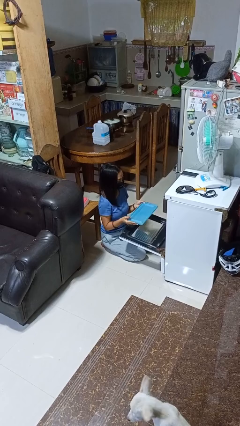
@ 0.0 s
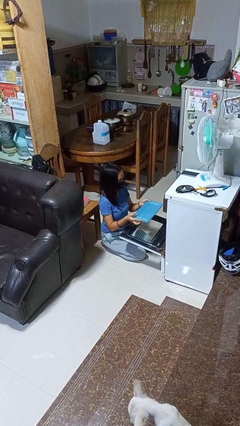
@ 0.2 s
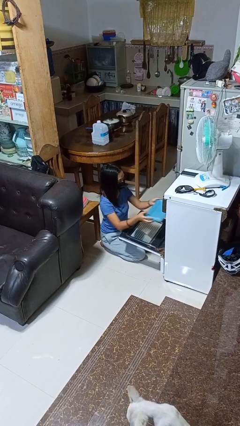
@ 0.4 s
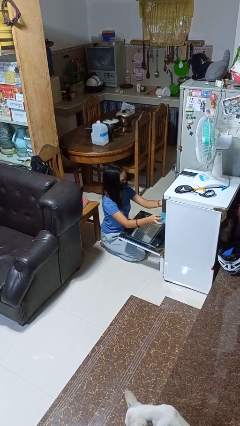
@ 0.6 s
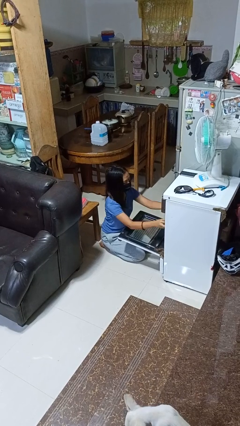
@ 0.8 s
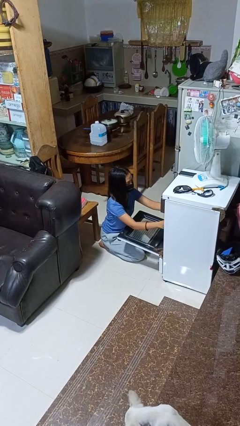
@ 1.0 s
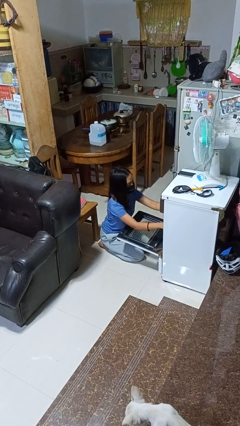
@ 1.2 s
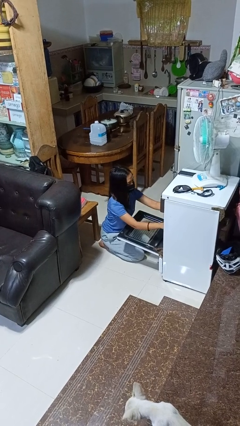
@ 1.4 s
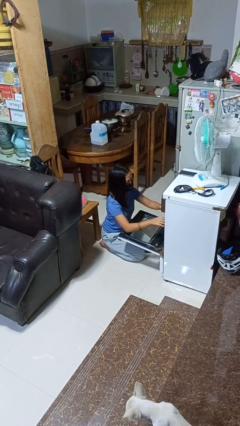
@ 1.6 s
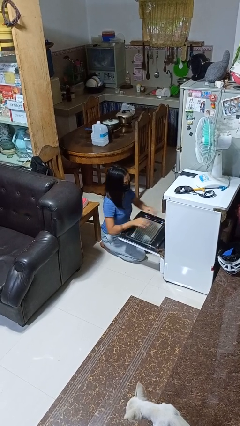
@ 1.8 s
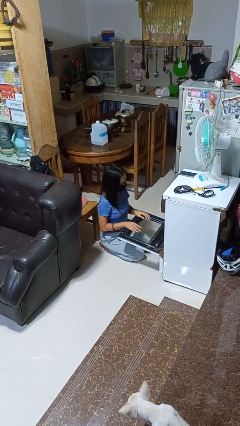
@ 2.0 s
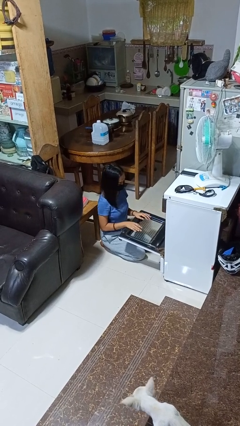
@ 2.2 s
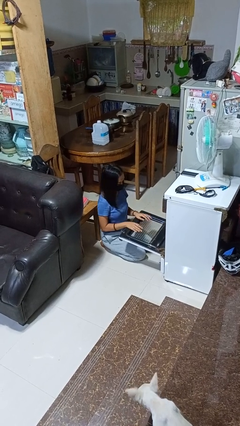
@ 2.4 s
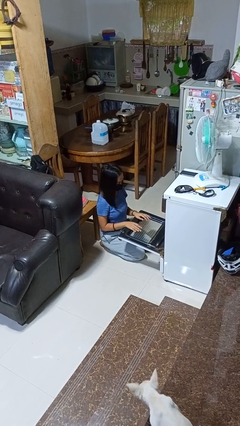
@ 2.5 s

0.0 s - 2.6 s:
person puts object into oven

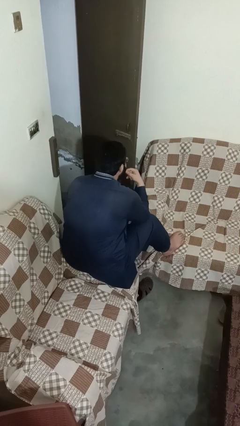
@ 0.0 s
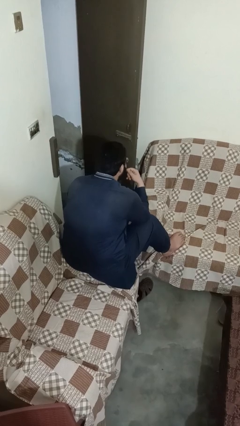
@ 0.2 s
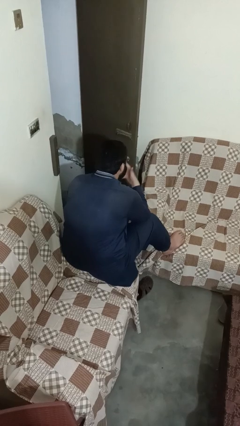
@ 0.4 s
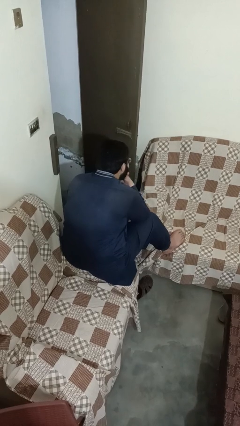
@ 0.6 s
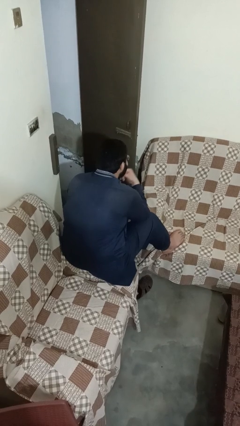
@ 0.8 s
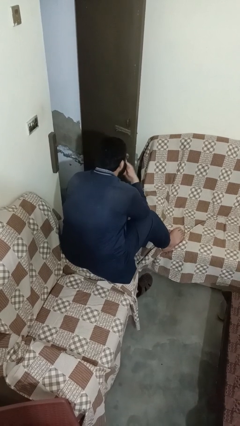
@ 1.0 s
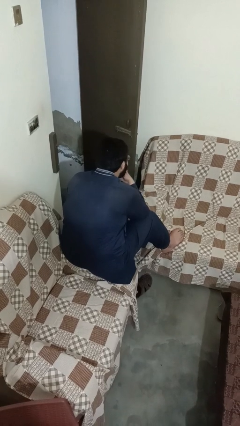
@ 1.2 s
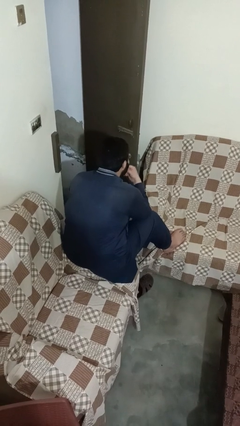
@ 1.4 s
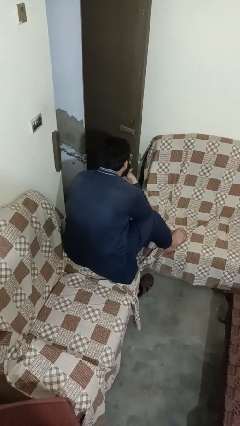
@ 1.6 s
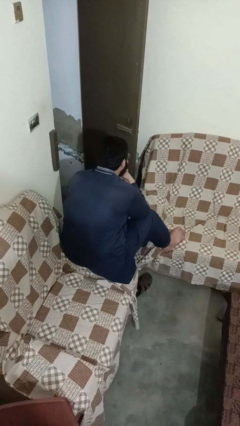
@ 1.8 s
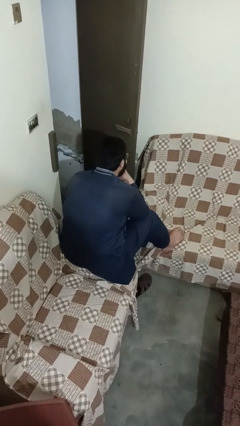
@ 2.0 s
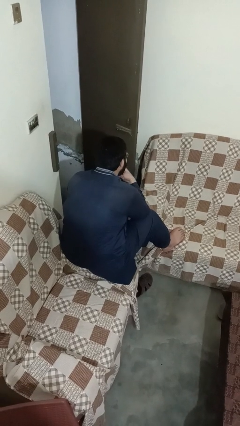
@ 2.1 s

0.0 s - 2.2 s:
person strokes chin

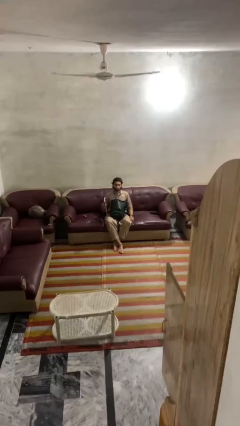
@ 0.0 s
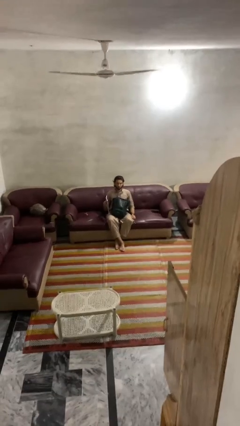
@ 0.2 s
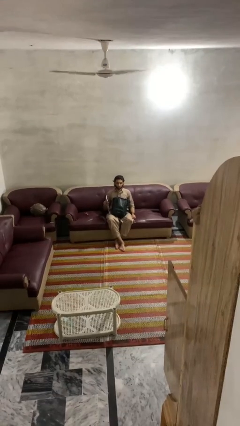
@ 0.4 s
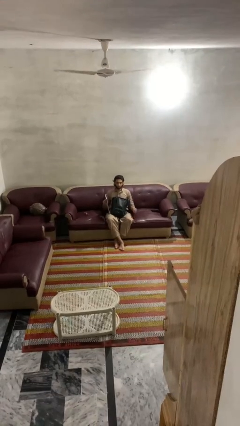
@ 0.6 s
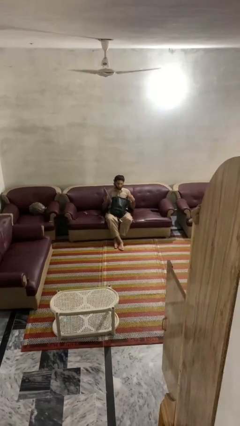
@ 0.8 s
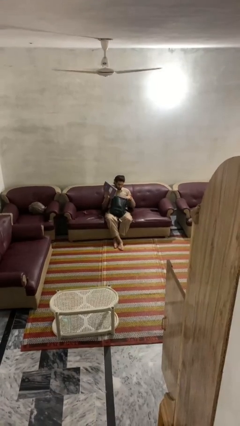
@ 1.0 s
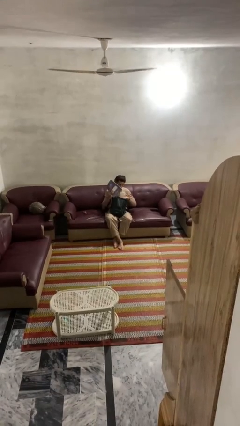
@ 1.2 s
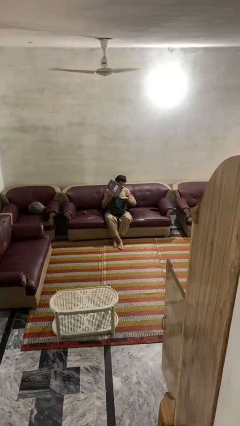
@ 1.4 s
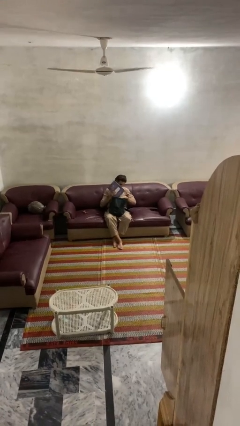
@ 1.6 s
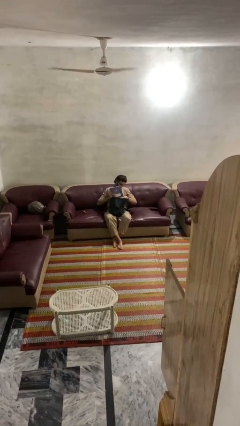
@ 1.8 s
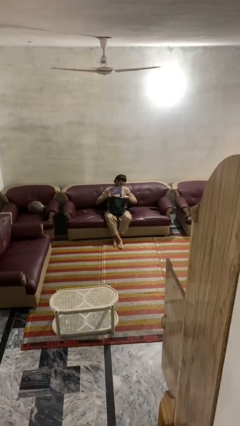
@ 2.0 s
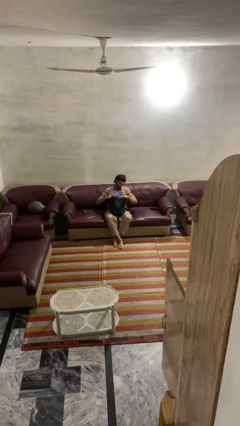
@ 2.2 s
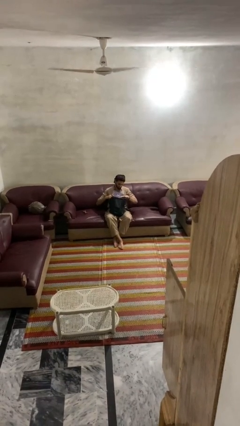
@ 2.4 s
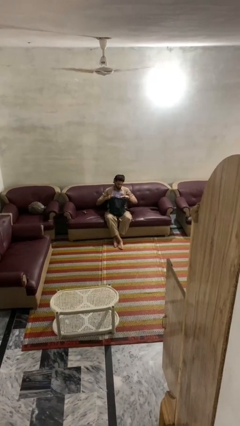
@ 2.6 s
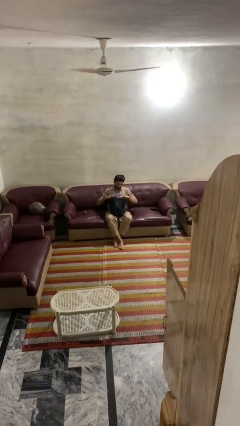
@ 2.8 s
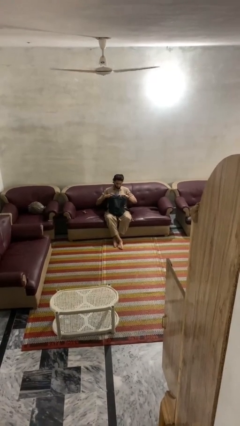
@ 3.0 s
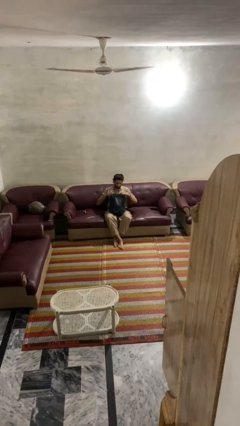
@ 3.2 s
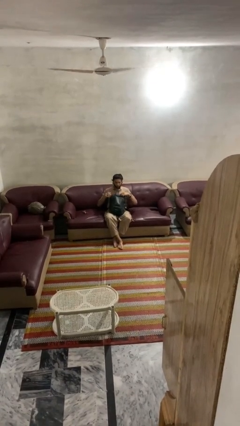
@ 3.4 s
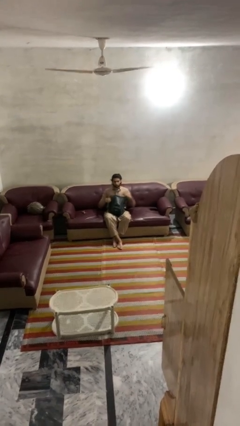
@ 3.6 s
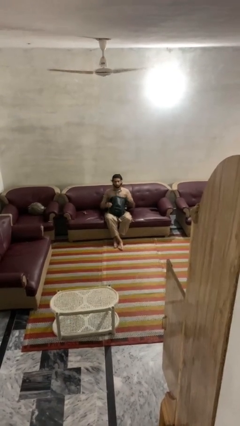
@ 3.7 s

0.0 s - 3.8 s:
person puts object into backpack

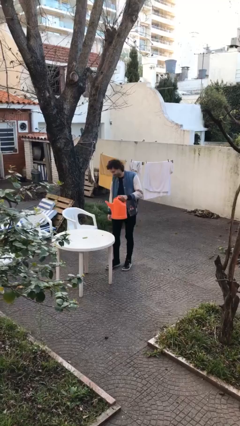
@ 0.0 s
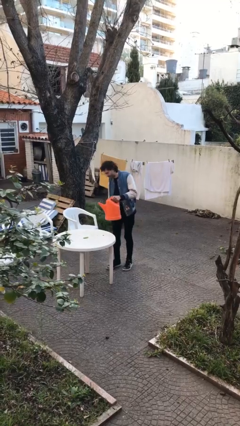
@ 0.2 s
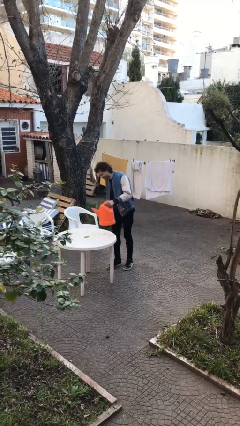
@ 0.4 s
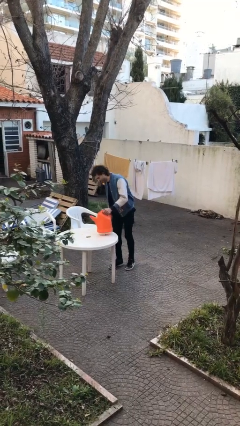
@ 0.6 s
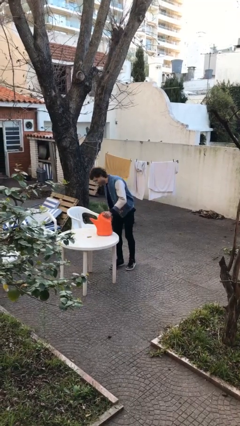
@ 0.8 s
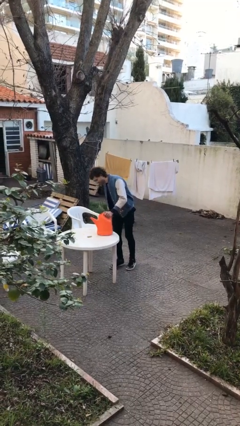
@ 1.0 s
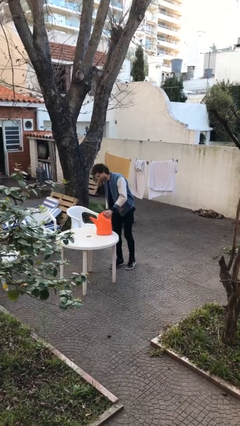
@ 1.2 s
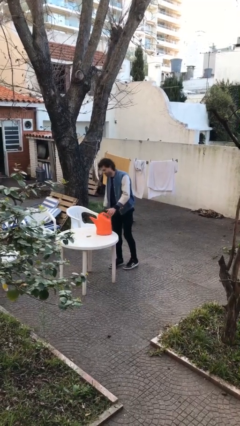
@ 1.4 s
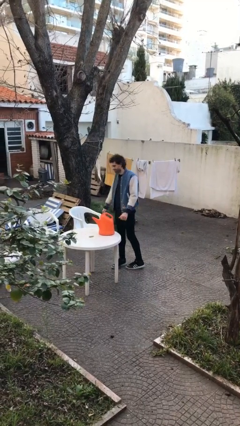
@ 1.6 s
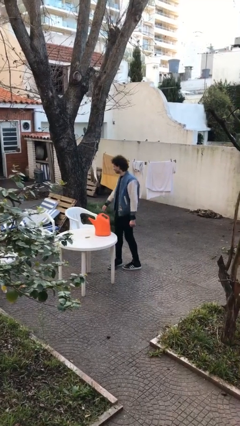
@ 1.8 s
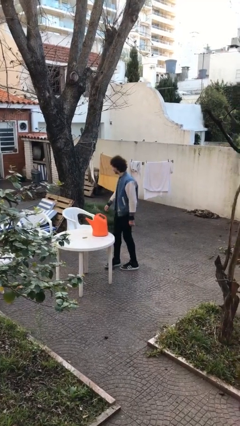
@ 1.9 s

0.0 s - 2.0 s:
person puts down object on table

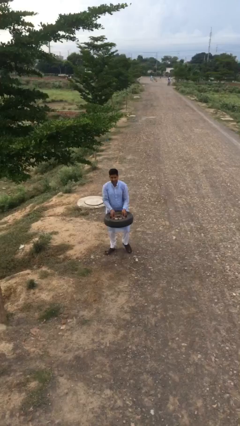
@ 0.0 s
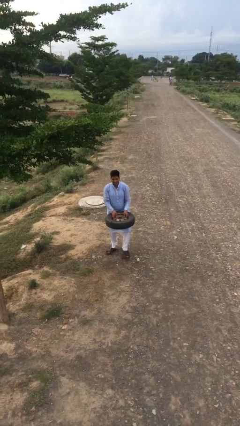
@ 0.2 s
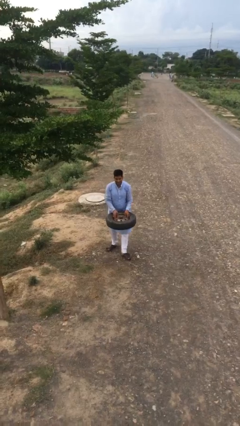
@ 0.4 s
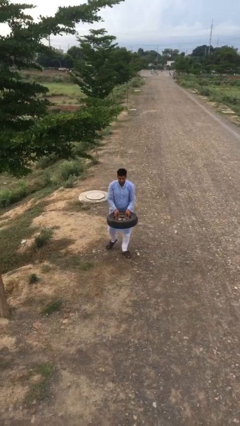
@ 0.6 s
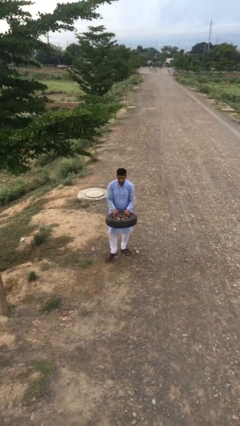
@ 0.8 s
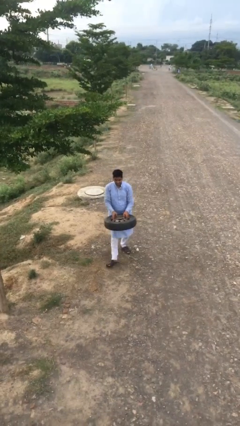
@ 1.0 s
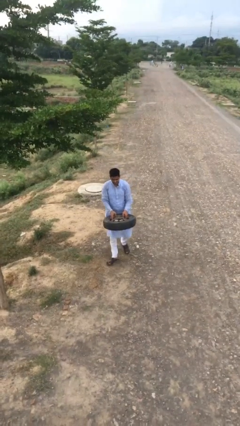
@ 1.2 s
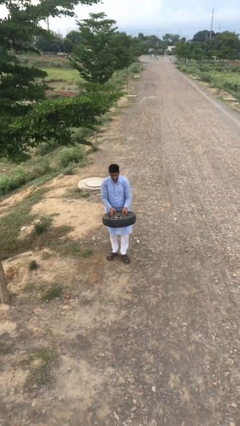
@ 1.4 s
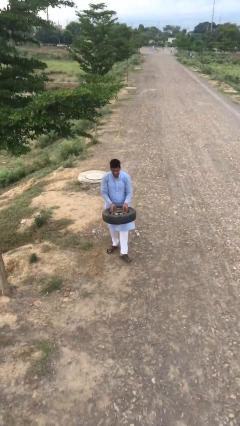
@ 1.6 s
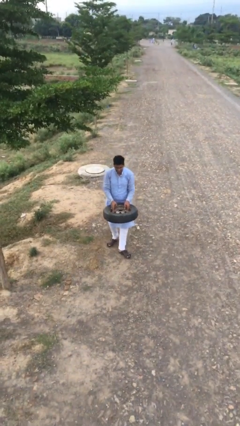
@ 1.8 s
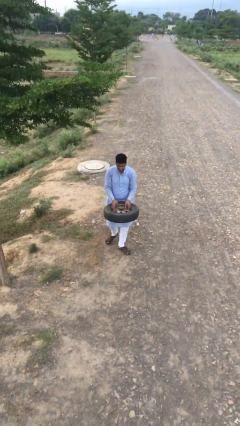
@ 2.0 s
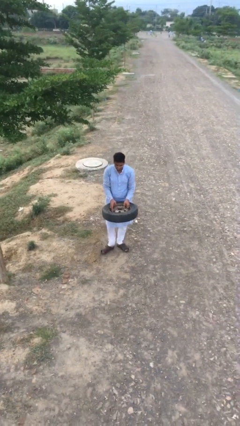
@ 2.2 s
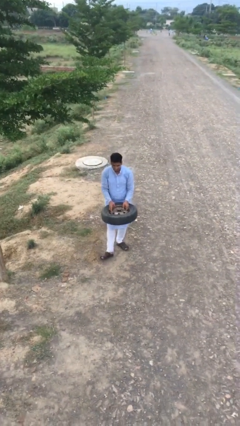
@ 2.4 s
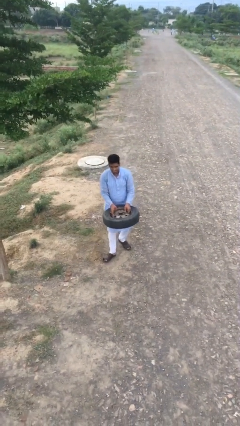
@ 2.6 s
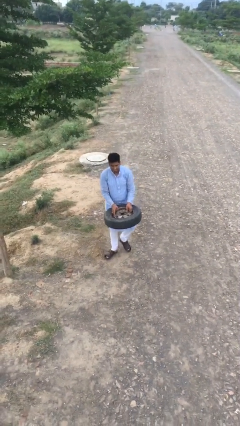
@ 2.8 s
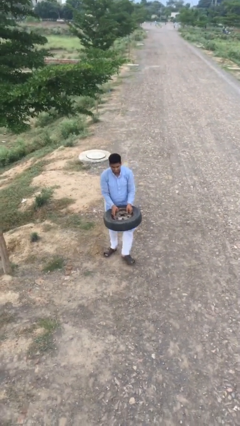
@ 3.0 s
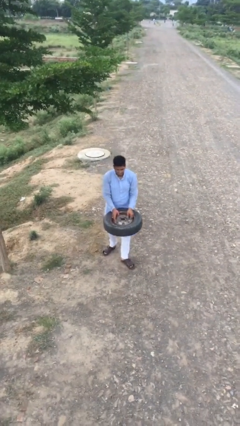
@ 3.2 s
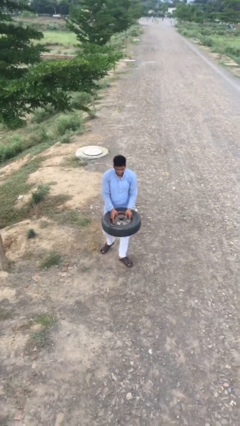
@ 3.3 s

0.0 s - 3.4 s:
person carries heavy object

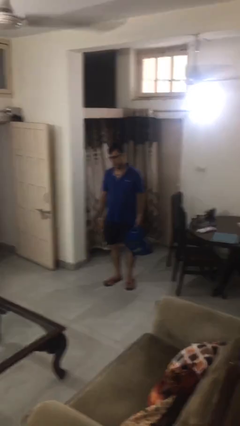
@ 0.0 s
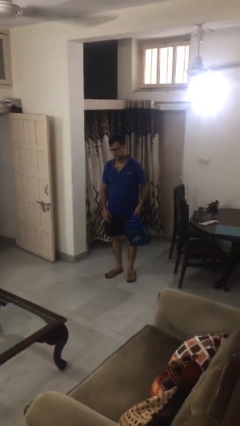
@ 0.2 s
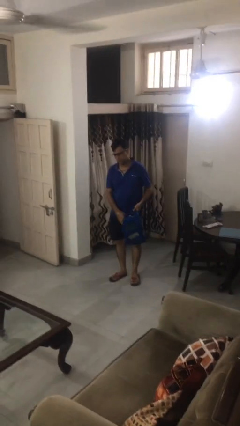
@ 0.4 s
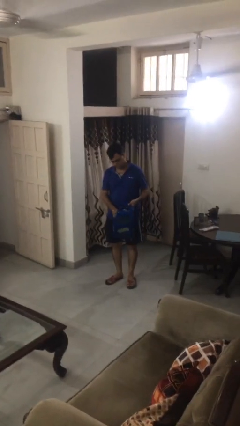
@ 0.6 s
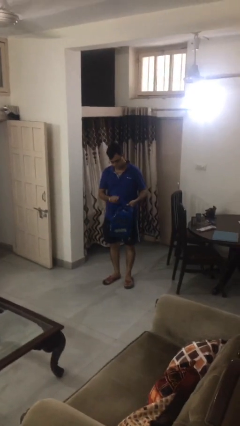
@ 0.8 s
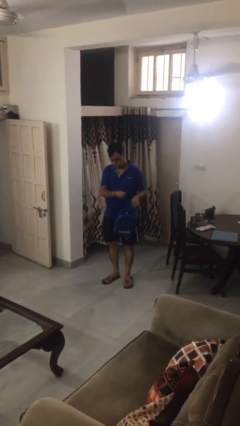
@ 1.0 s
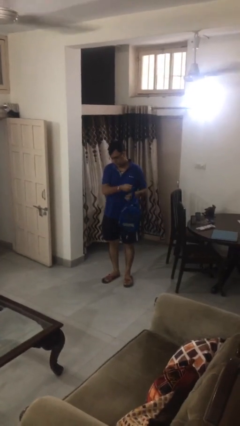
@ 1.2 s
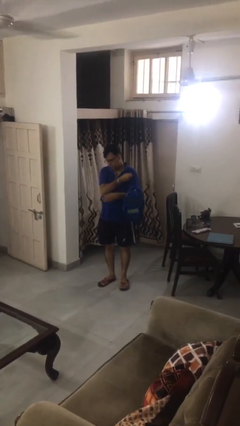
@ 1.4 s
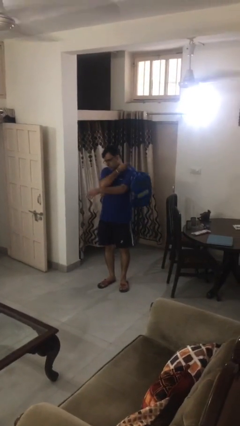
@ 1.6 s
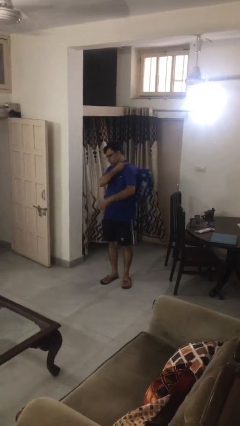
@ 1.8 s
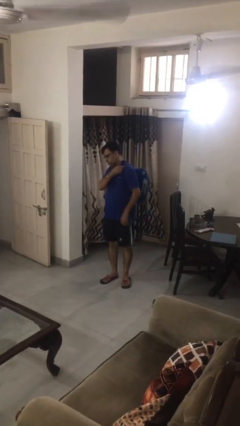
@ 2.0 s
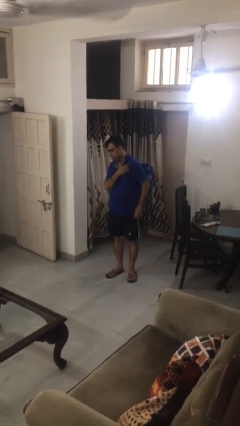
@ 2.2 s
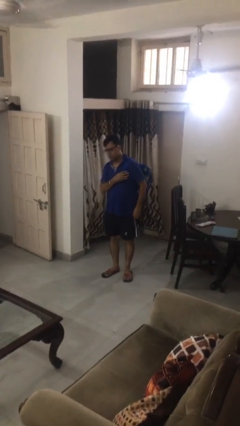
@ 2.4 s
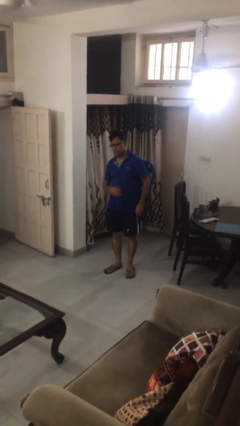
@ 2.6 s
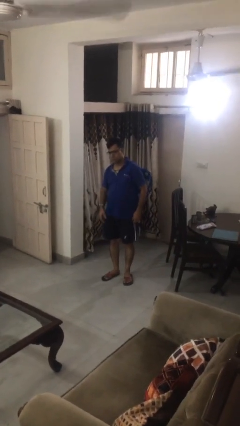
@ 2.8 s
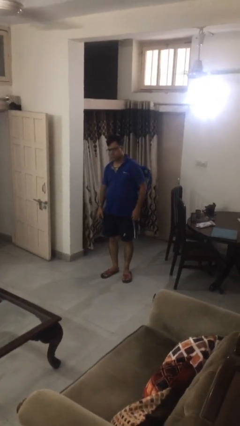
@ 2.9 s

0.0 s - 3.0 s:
person puts on backpack

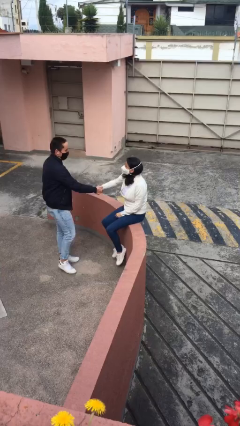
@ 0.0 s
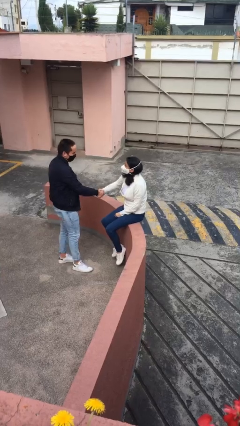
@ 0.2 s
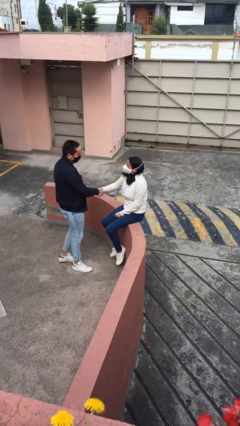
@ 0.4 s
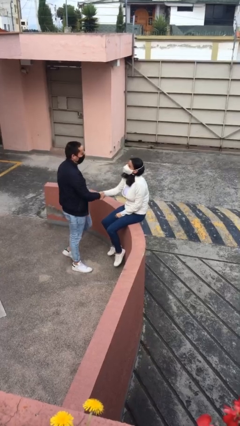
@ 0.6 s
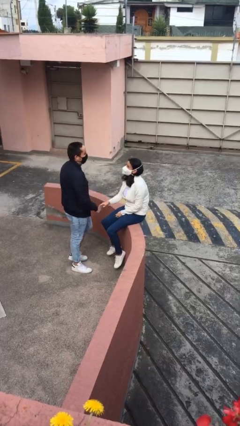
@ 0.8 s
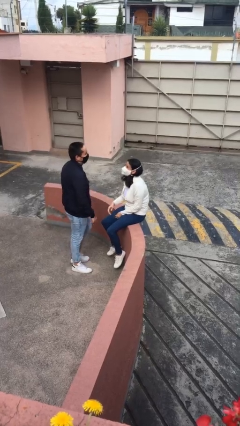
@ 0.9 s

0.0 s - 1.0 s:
person shakes hand
